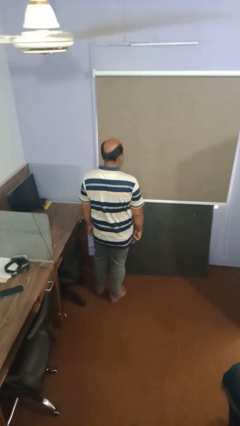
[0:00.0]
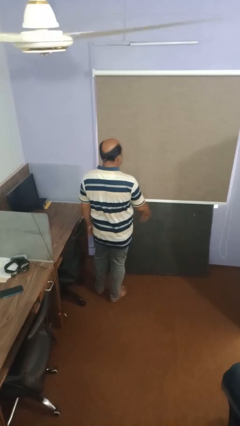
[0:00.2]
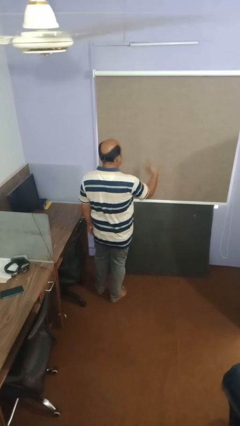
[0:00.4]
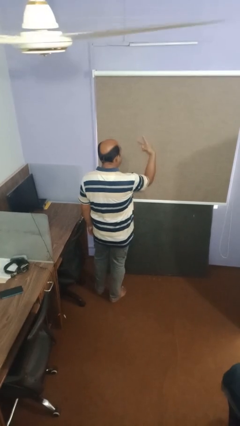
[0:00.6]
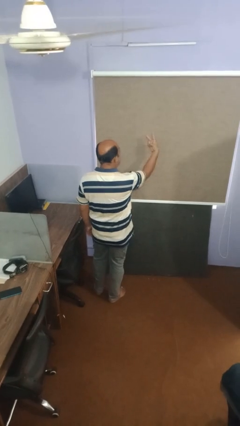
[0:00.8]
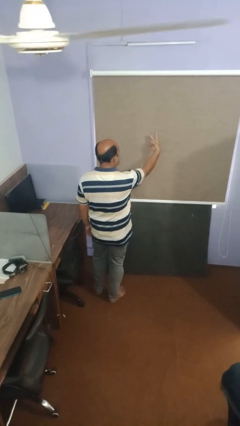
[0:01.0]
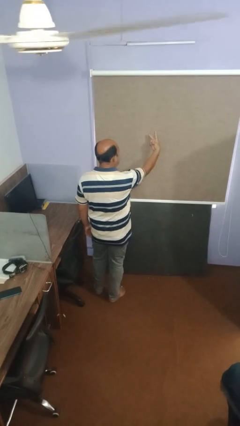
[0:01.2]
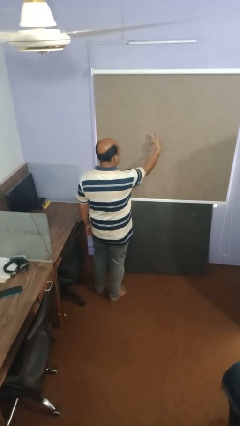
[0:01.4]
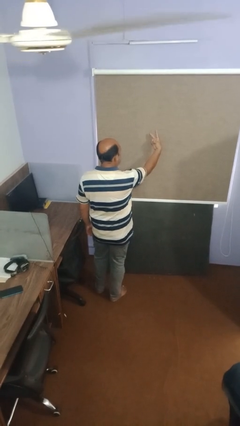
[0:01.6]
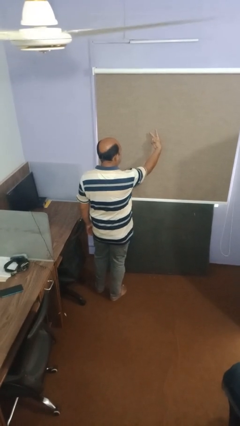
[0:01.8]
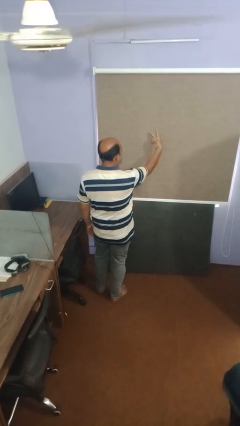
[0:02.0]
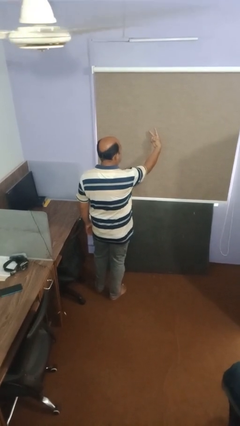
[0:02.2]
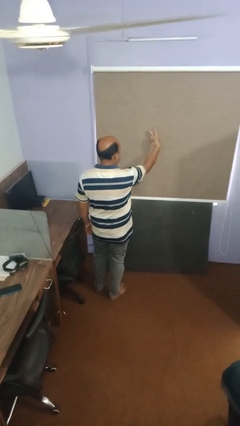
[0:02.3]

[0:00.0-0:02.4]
person gestures peace

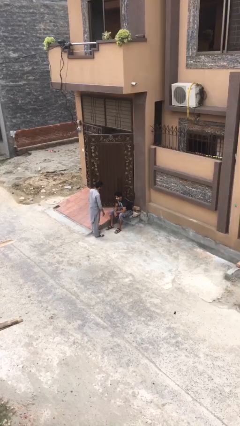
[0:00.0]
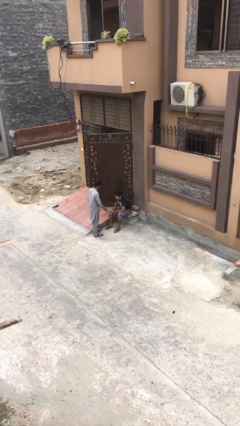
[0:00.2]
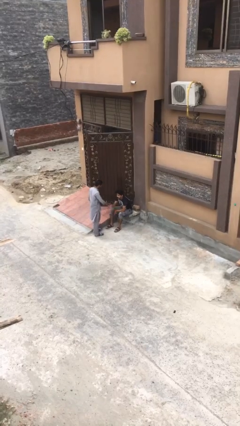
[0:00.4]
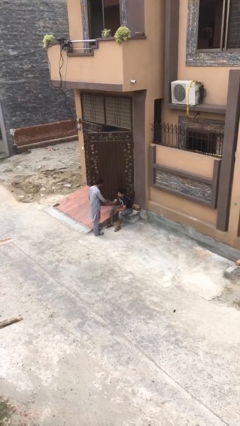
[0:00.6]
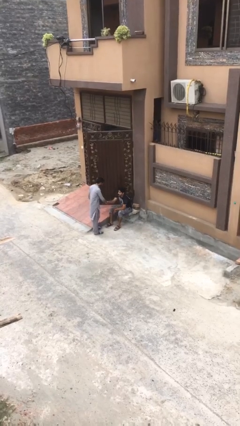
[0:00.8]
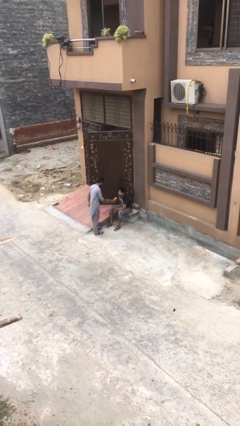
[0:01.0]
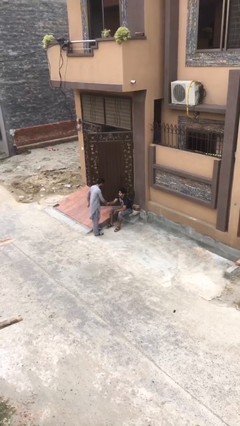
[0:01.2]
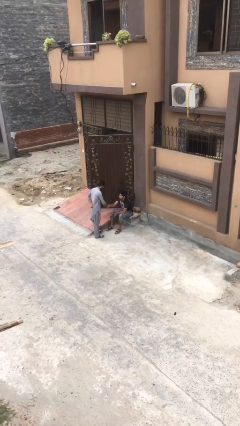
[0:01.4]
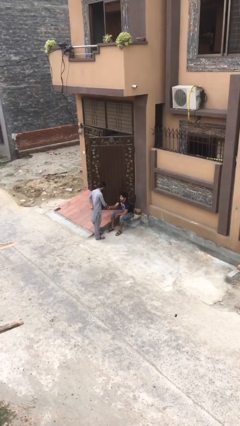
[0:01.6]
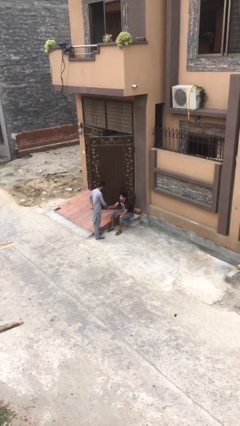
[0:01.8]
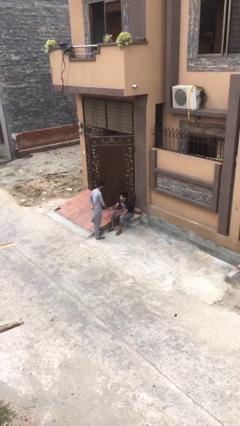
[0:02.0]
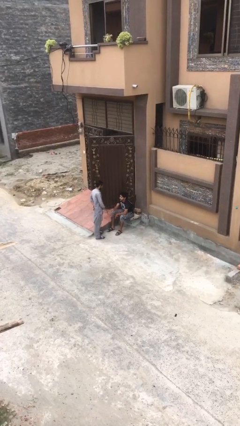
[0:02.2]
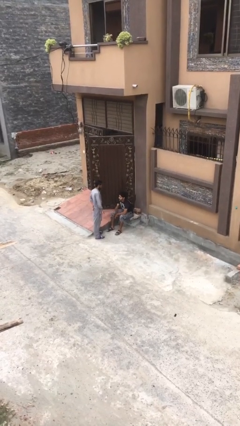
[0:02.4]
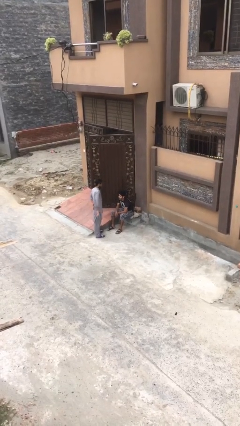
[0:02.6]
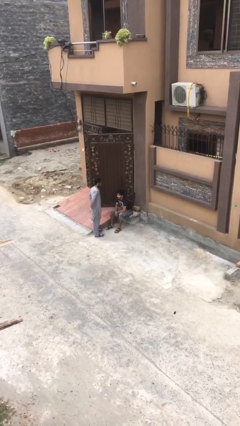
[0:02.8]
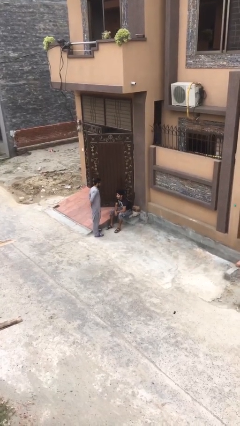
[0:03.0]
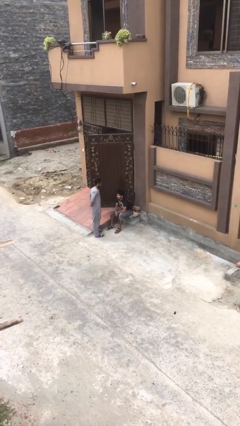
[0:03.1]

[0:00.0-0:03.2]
person shakes hand

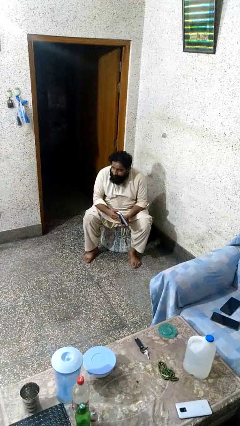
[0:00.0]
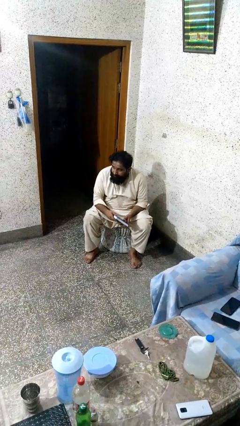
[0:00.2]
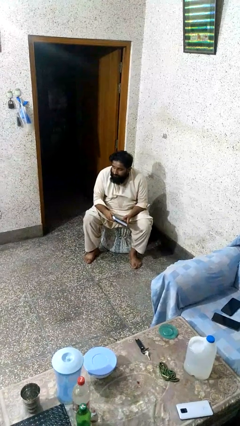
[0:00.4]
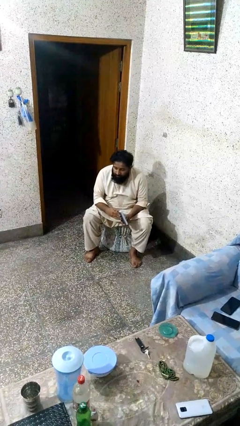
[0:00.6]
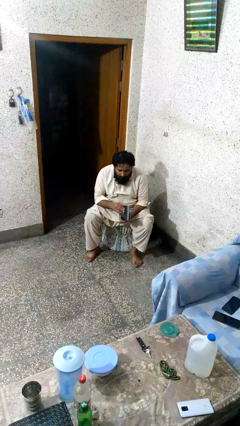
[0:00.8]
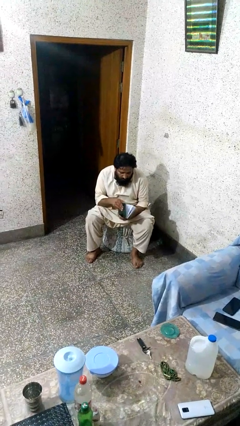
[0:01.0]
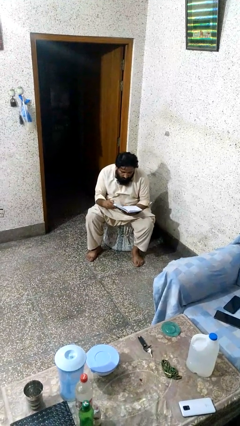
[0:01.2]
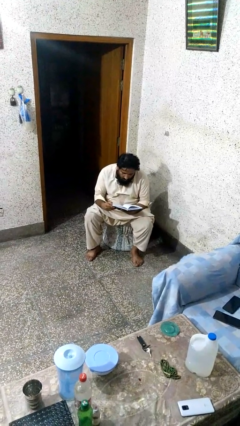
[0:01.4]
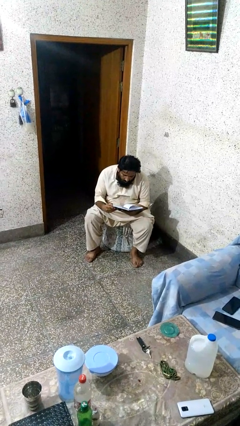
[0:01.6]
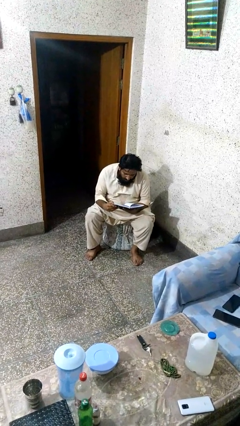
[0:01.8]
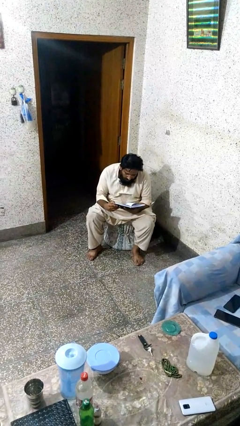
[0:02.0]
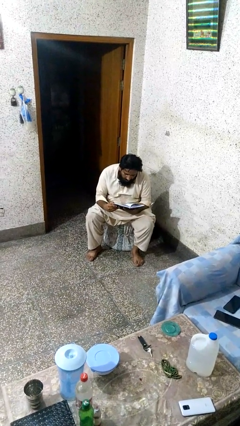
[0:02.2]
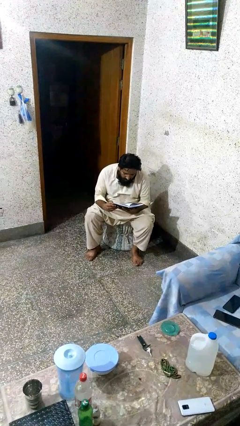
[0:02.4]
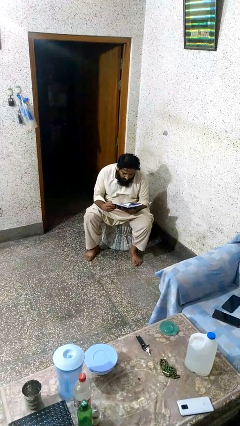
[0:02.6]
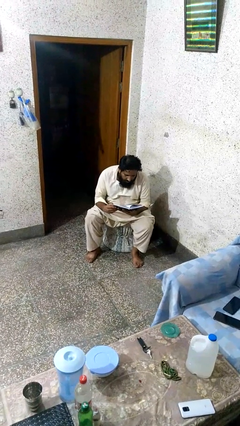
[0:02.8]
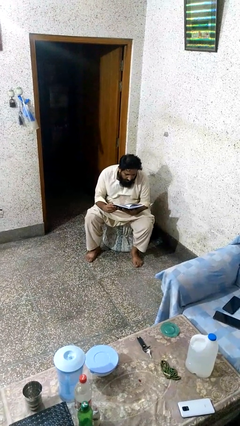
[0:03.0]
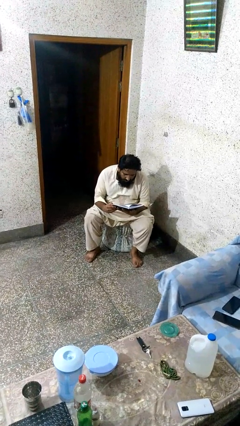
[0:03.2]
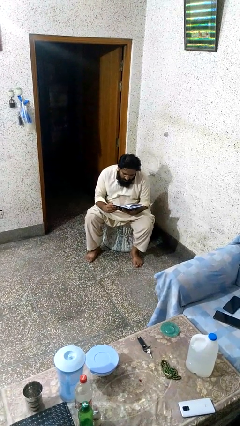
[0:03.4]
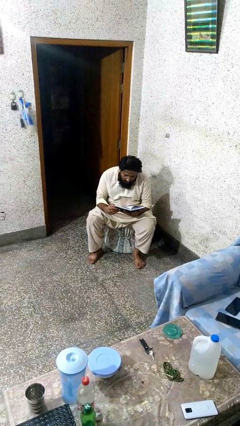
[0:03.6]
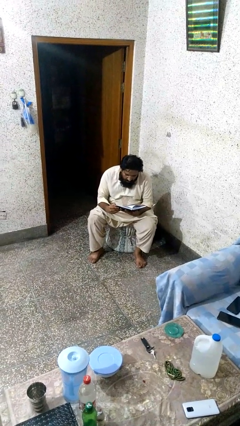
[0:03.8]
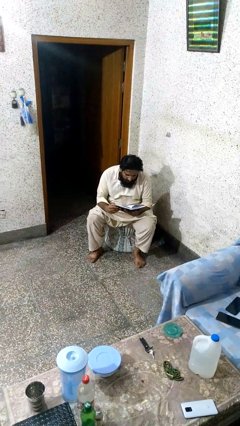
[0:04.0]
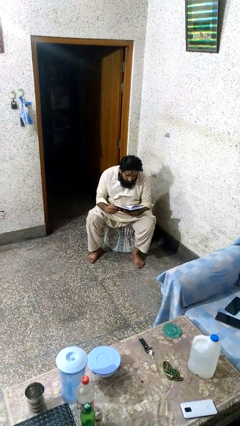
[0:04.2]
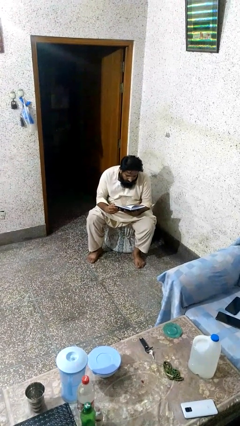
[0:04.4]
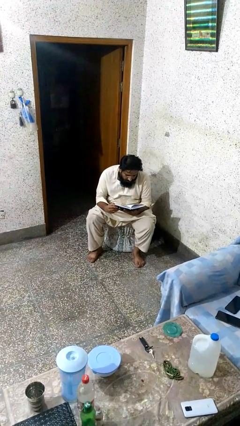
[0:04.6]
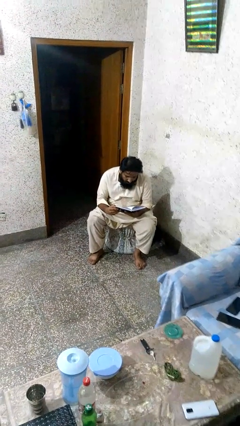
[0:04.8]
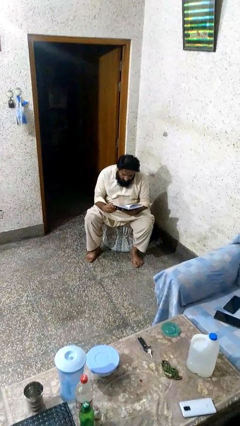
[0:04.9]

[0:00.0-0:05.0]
person reads book

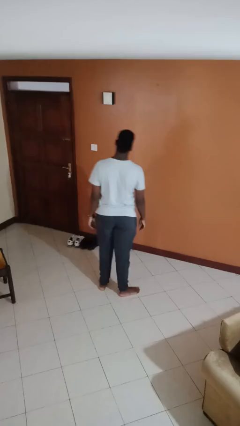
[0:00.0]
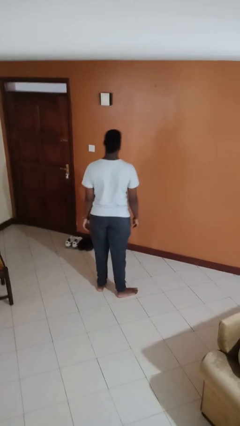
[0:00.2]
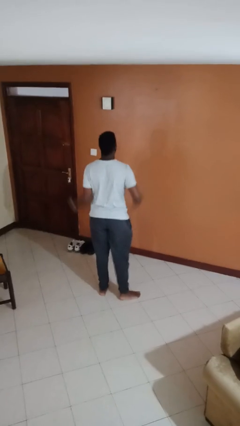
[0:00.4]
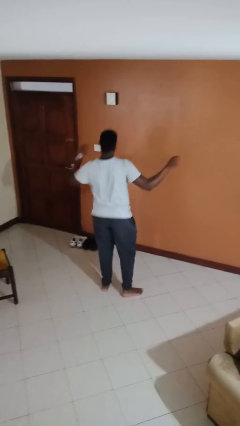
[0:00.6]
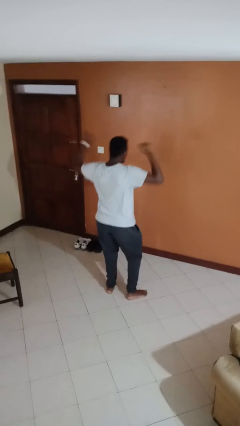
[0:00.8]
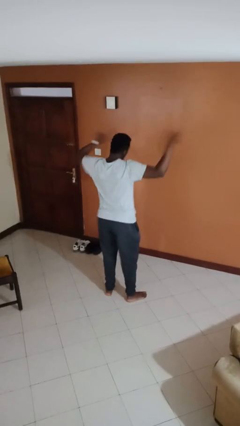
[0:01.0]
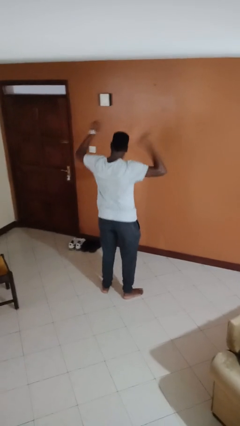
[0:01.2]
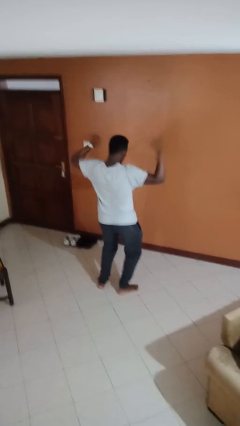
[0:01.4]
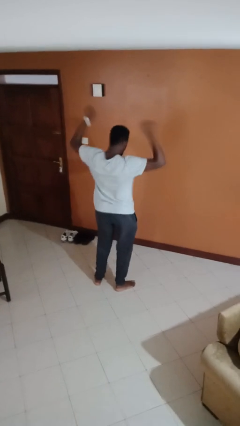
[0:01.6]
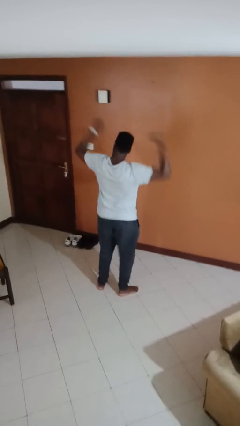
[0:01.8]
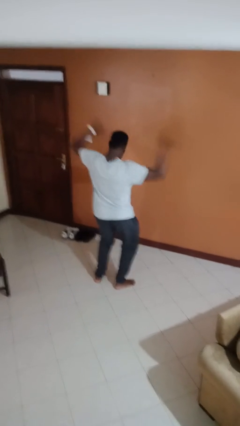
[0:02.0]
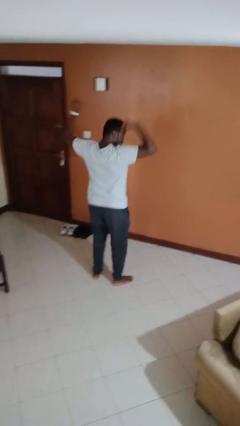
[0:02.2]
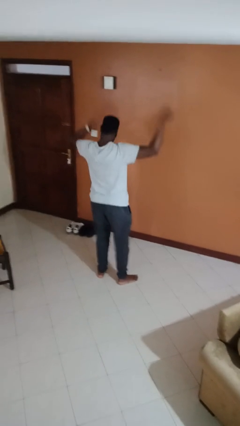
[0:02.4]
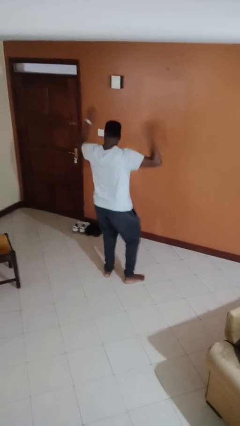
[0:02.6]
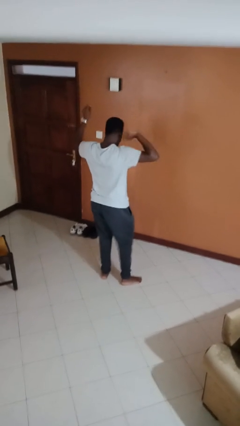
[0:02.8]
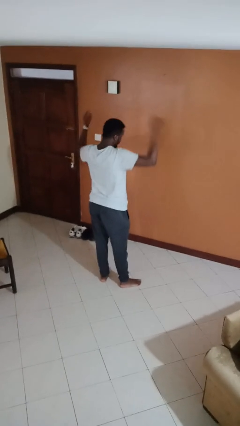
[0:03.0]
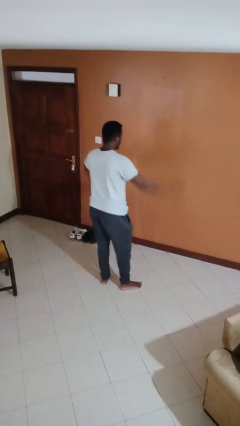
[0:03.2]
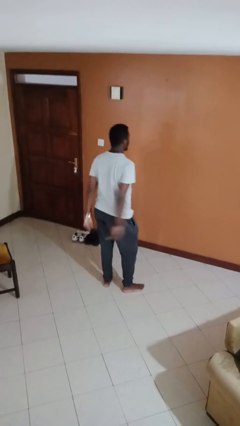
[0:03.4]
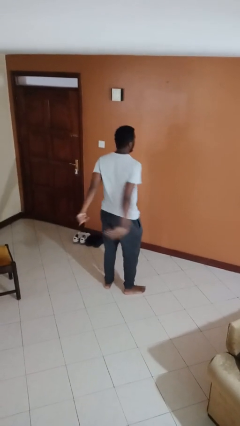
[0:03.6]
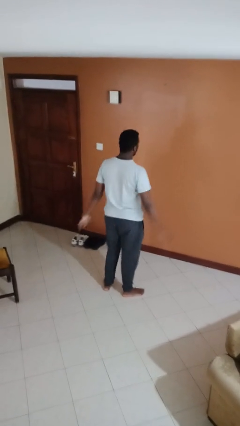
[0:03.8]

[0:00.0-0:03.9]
person dances in place

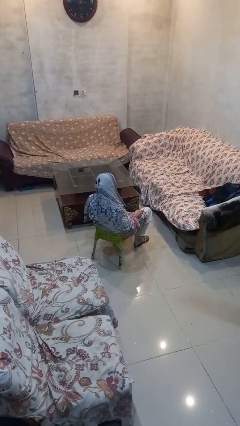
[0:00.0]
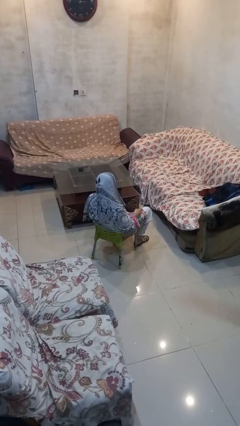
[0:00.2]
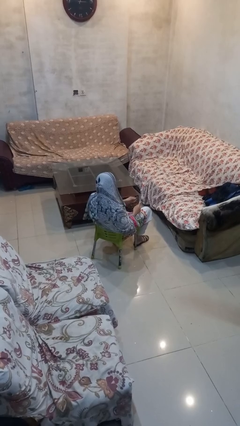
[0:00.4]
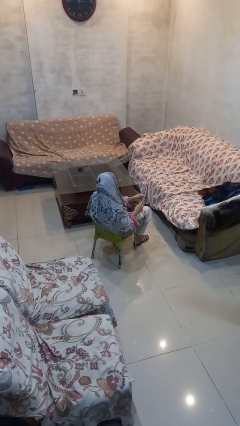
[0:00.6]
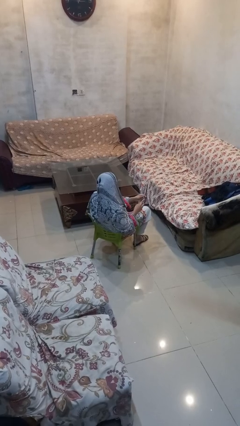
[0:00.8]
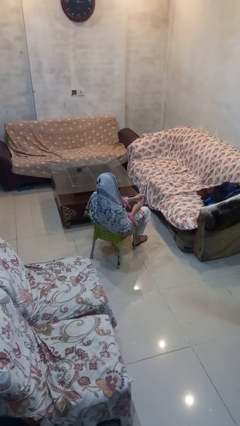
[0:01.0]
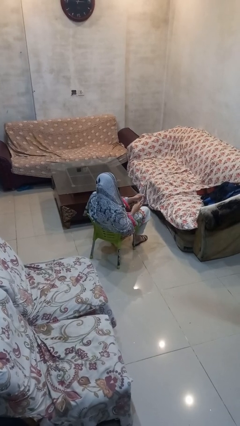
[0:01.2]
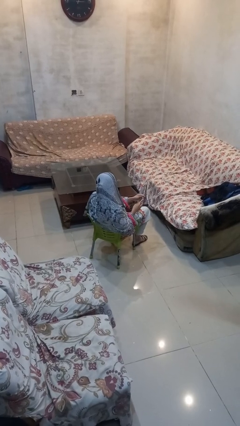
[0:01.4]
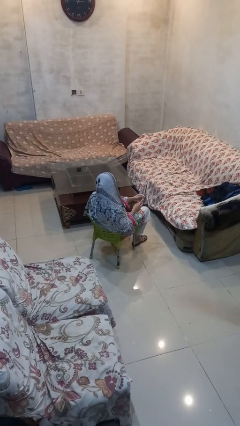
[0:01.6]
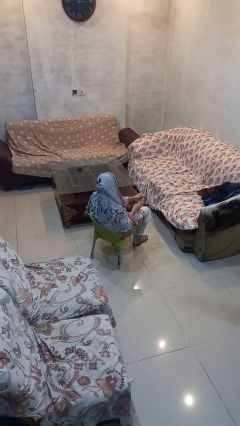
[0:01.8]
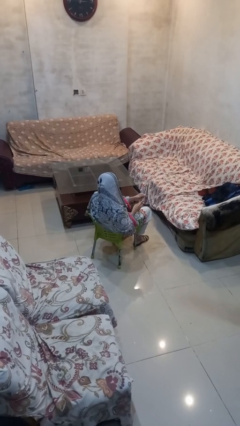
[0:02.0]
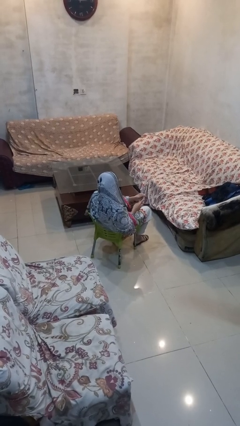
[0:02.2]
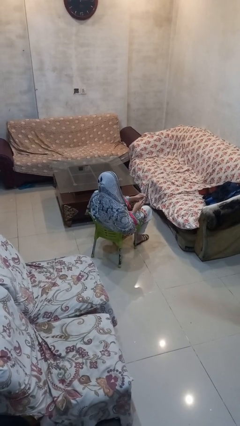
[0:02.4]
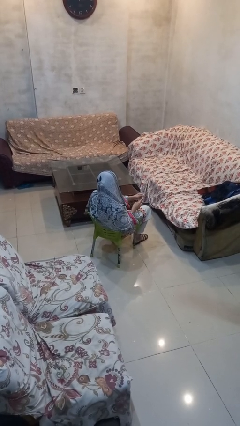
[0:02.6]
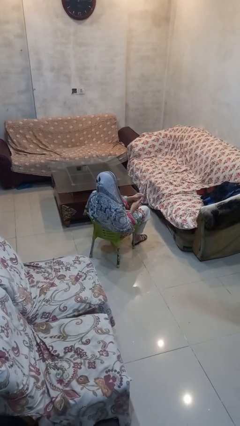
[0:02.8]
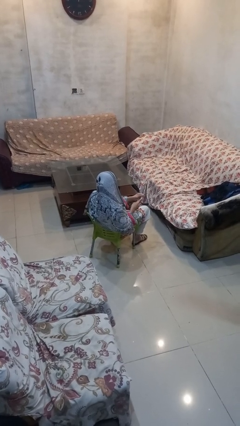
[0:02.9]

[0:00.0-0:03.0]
person files fingernails

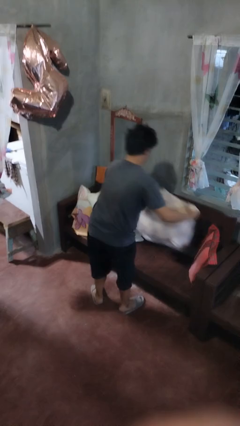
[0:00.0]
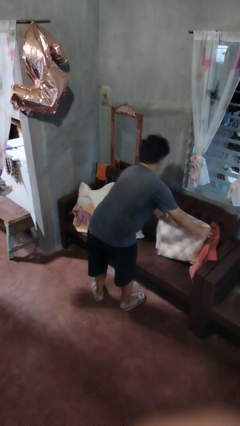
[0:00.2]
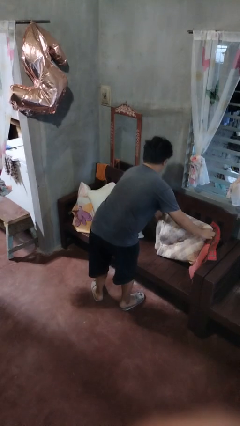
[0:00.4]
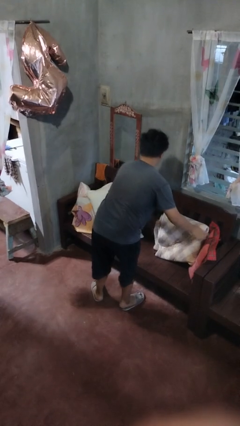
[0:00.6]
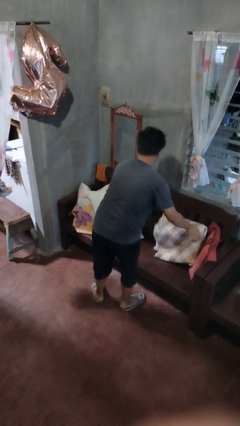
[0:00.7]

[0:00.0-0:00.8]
person puts down object on couch
